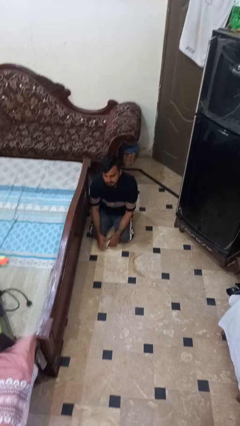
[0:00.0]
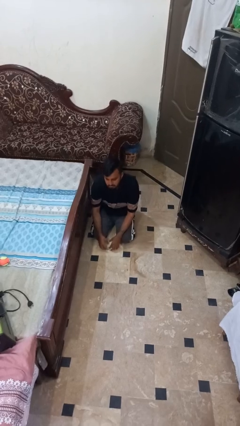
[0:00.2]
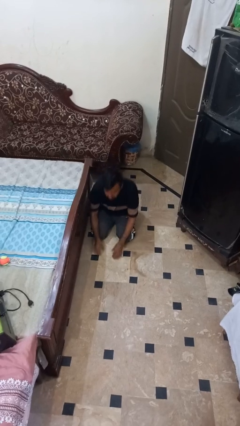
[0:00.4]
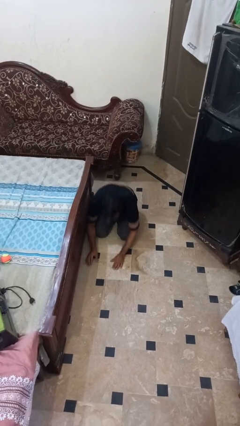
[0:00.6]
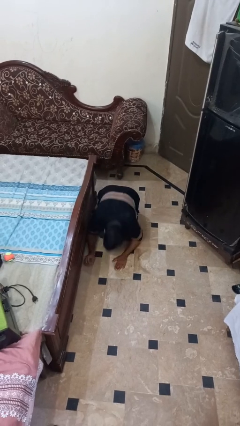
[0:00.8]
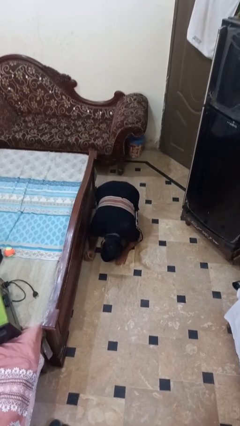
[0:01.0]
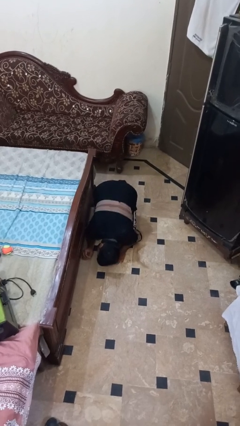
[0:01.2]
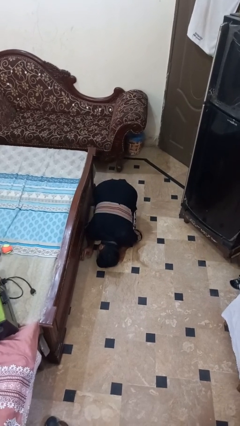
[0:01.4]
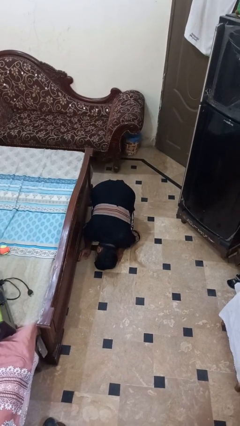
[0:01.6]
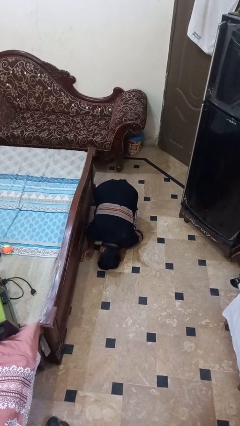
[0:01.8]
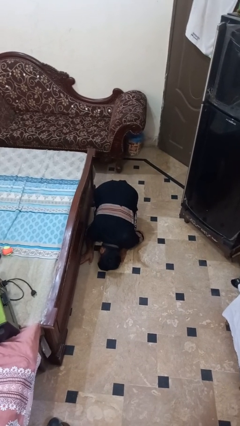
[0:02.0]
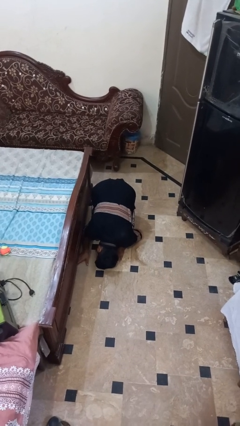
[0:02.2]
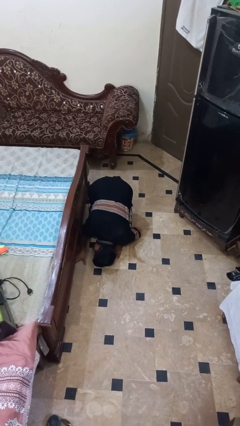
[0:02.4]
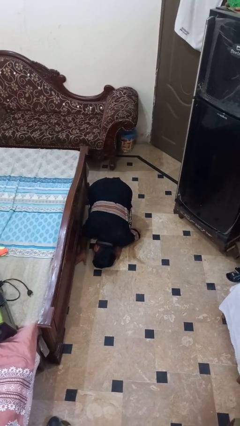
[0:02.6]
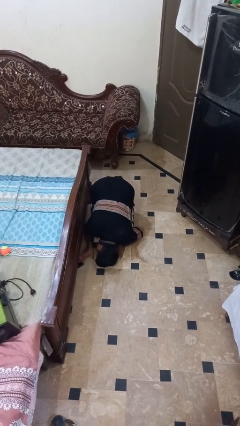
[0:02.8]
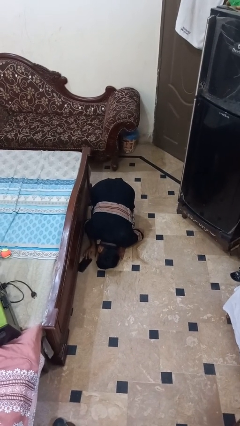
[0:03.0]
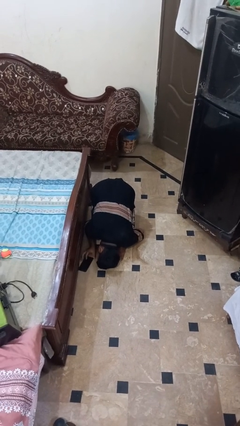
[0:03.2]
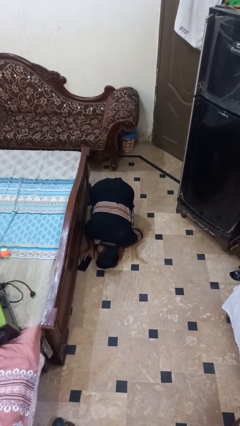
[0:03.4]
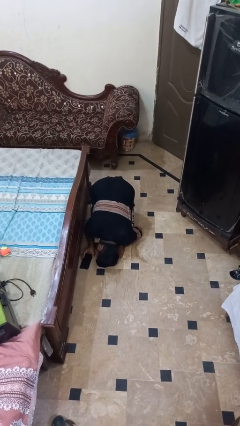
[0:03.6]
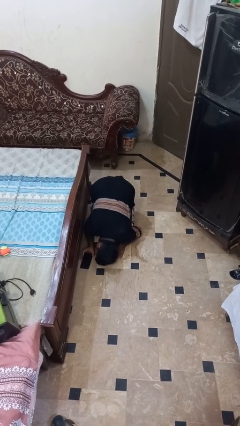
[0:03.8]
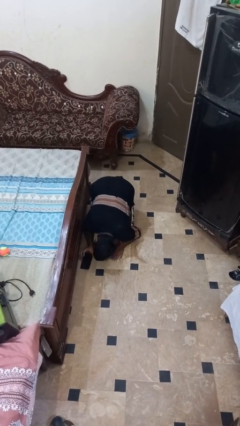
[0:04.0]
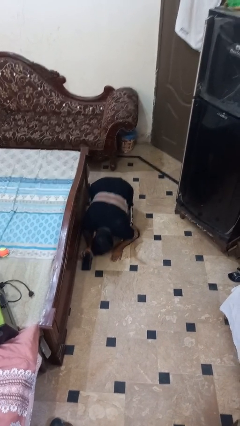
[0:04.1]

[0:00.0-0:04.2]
person searches under bed

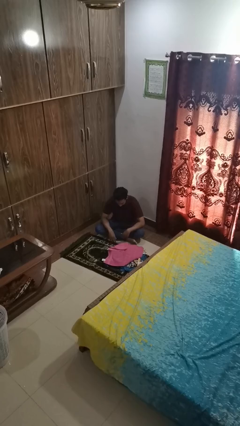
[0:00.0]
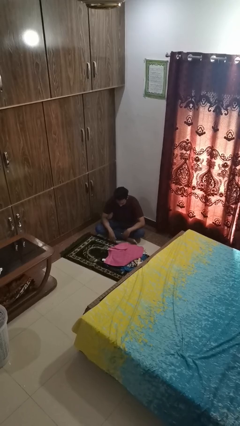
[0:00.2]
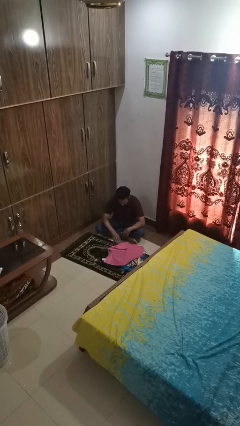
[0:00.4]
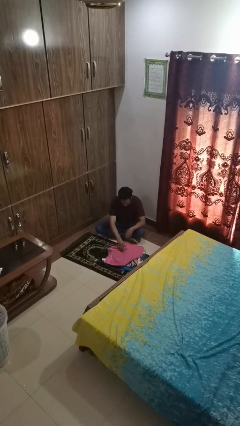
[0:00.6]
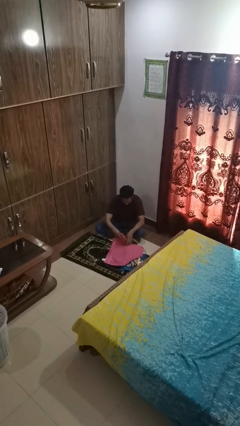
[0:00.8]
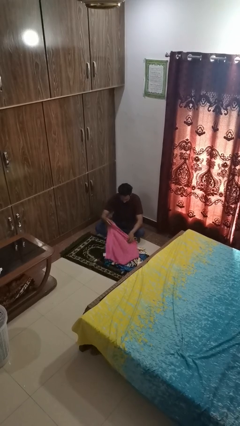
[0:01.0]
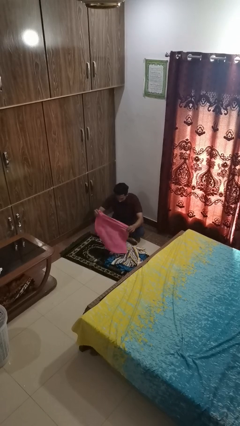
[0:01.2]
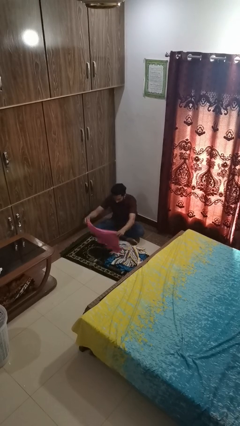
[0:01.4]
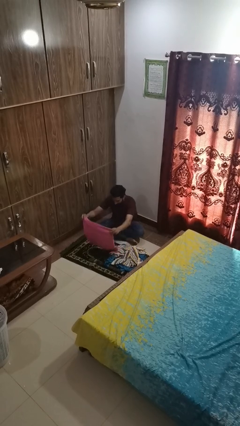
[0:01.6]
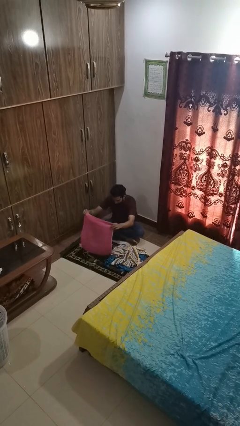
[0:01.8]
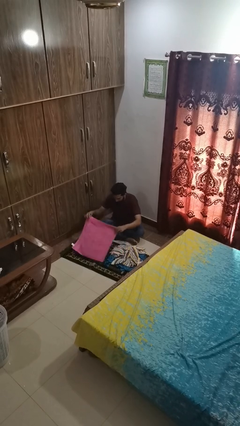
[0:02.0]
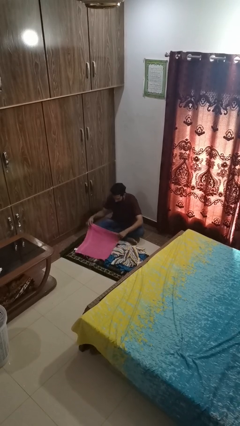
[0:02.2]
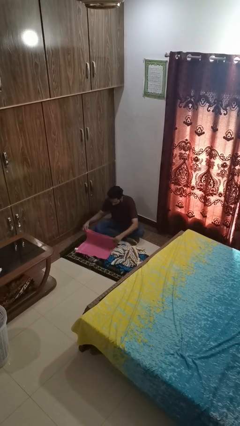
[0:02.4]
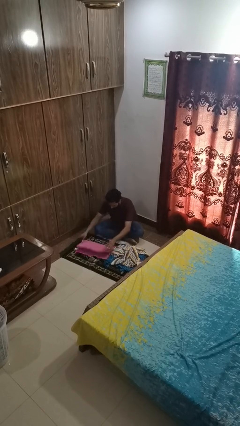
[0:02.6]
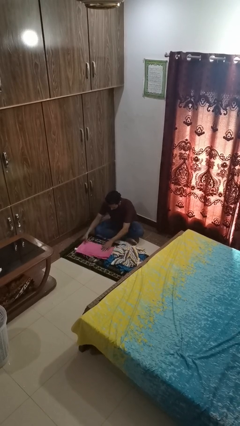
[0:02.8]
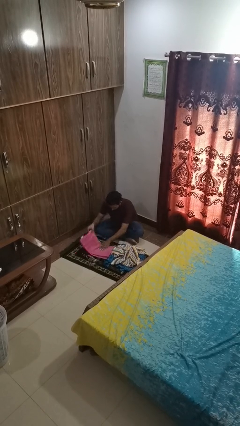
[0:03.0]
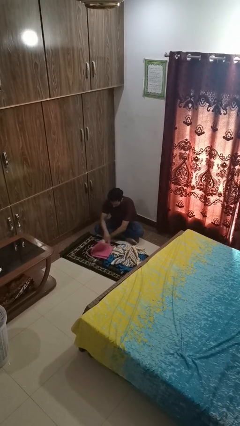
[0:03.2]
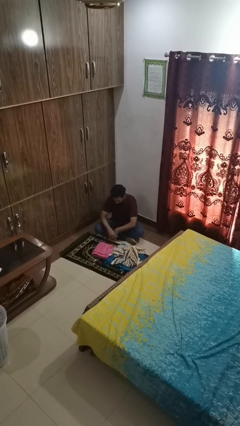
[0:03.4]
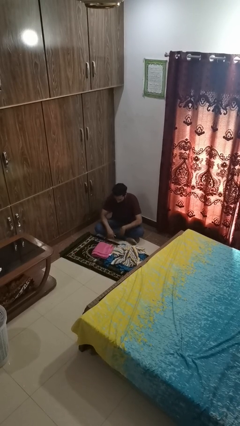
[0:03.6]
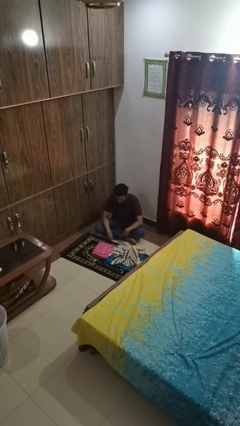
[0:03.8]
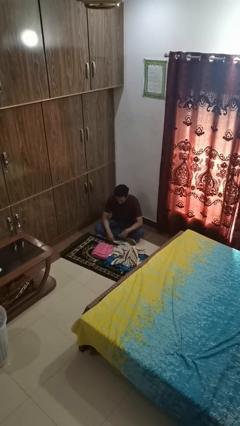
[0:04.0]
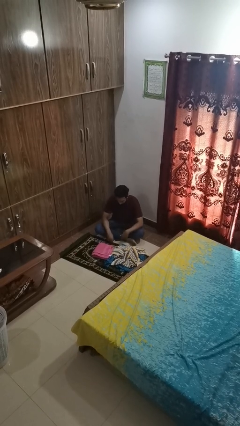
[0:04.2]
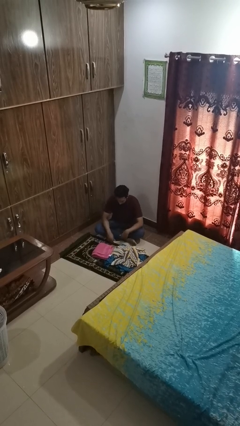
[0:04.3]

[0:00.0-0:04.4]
person folds towel

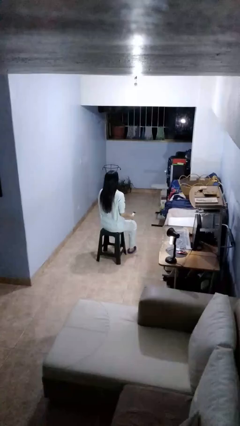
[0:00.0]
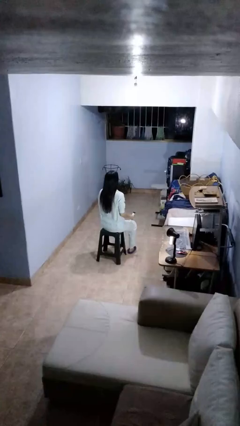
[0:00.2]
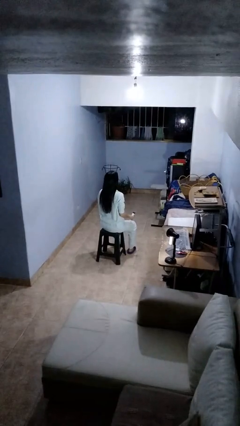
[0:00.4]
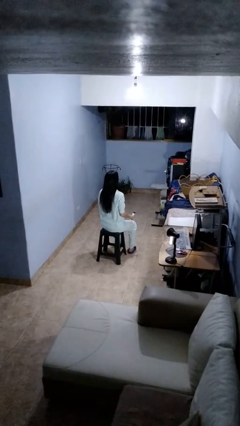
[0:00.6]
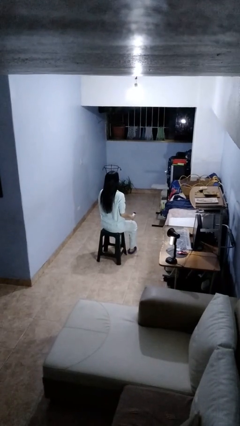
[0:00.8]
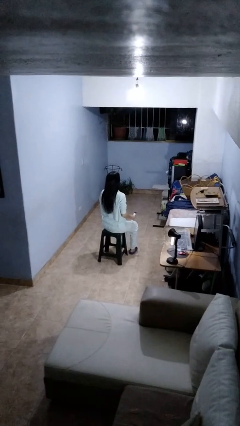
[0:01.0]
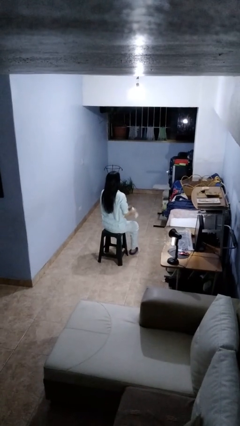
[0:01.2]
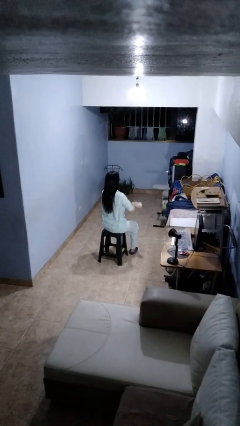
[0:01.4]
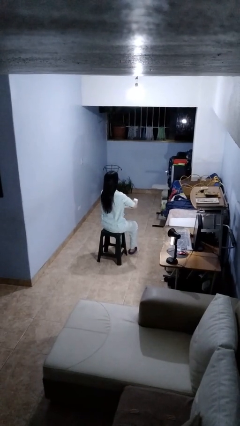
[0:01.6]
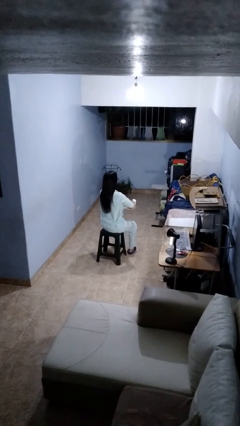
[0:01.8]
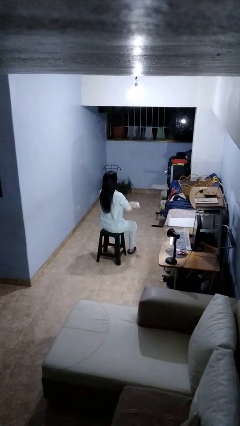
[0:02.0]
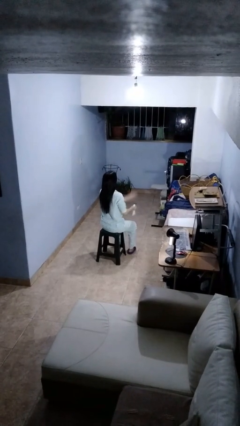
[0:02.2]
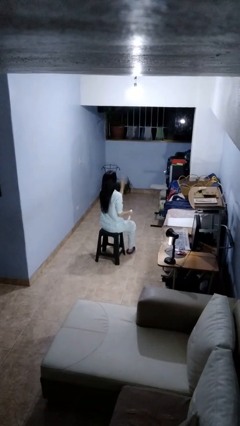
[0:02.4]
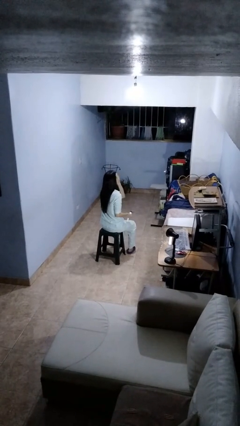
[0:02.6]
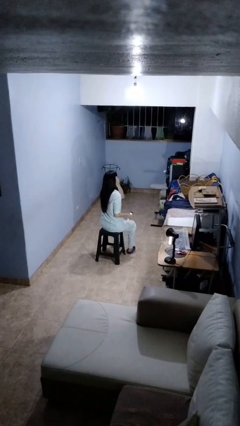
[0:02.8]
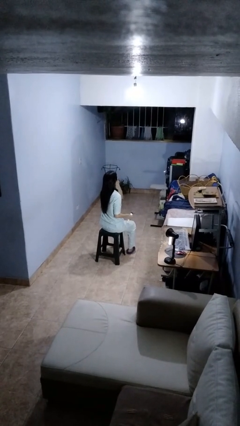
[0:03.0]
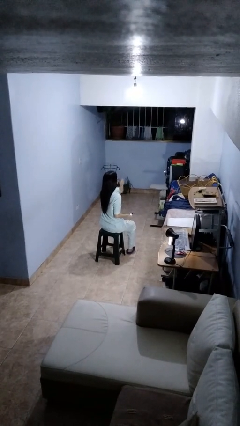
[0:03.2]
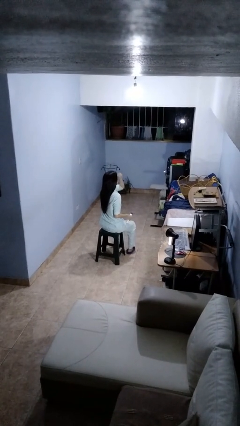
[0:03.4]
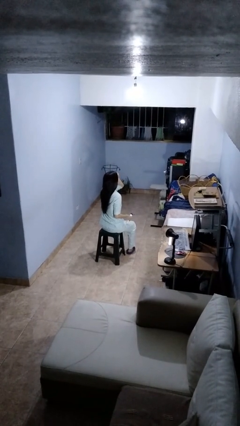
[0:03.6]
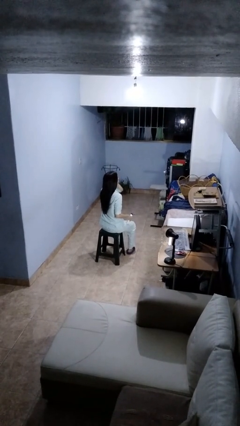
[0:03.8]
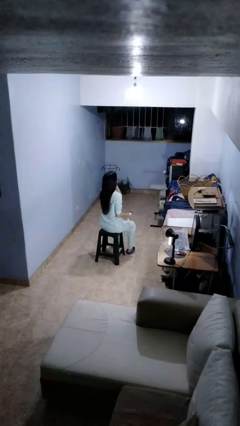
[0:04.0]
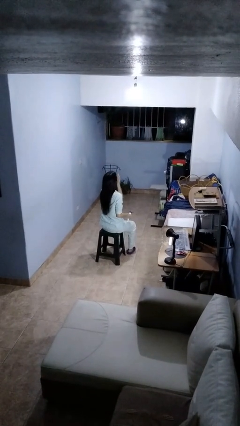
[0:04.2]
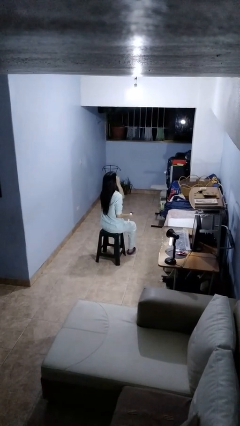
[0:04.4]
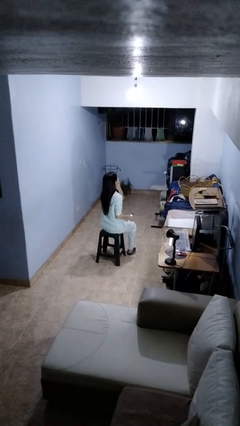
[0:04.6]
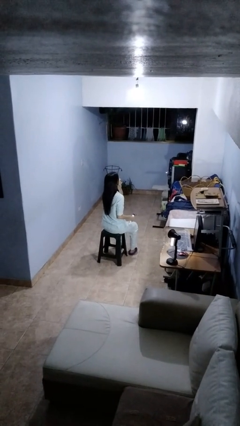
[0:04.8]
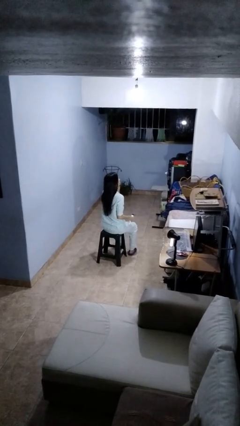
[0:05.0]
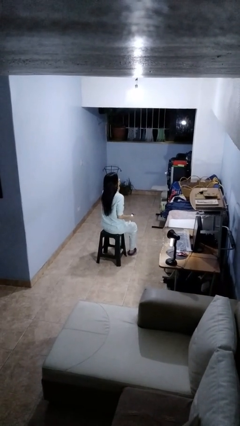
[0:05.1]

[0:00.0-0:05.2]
person applies sunscreen

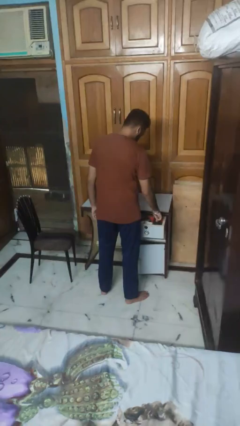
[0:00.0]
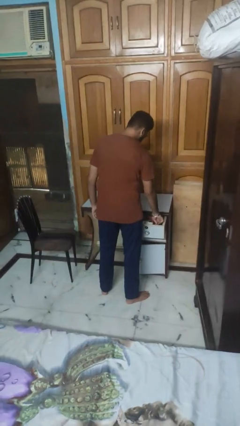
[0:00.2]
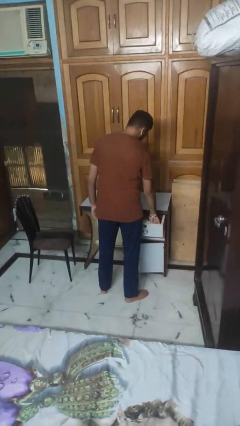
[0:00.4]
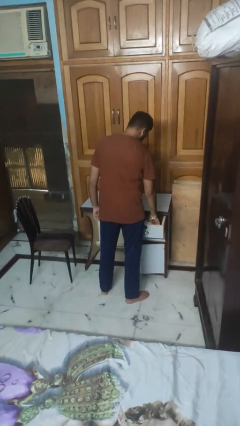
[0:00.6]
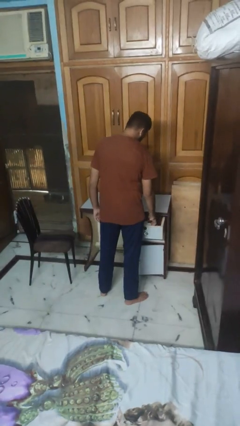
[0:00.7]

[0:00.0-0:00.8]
person puts object into kitchen drawer

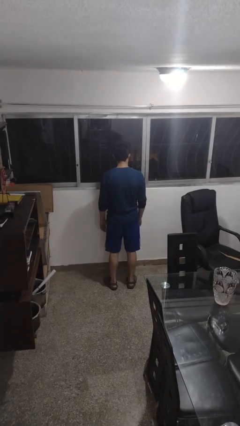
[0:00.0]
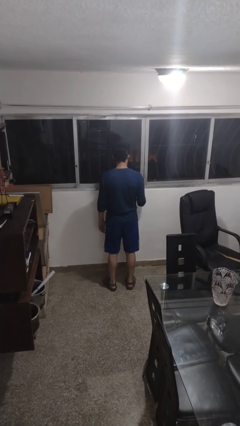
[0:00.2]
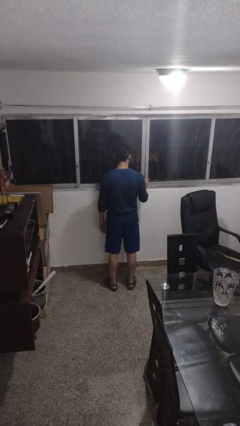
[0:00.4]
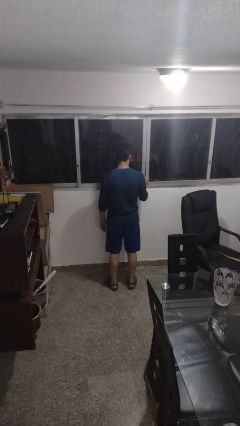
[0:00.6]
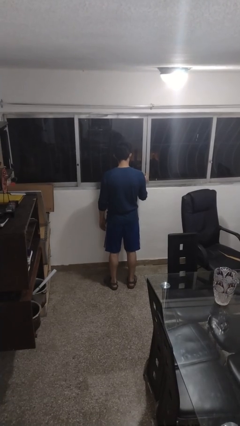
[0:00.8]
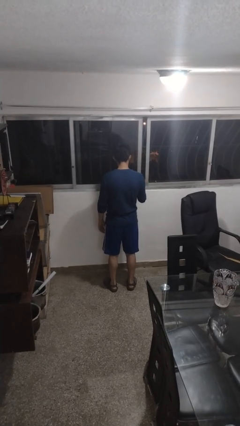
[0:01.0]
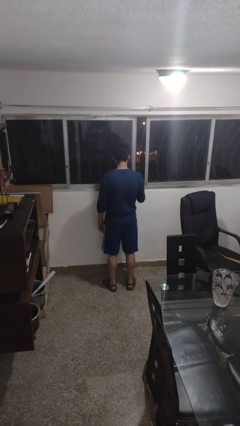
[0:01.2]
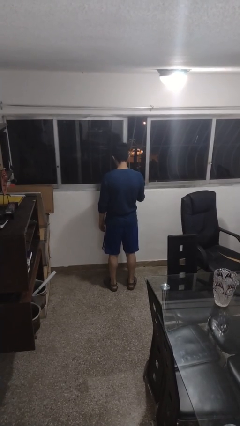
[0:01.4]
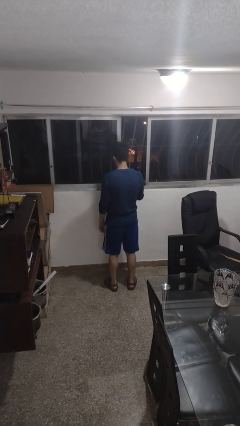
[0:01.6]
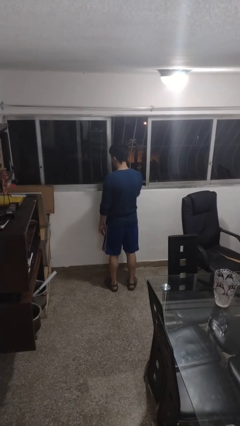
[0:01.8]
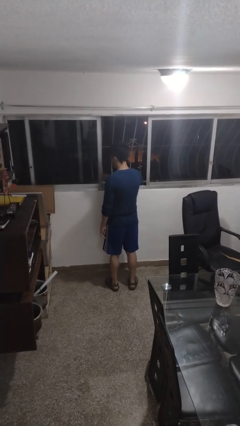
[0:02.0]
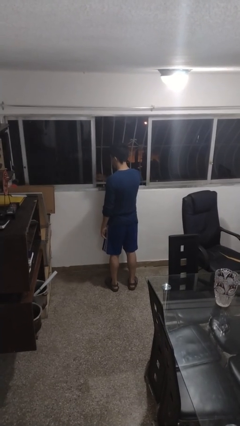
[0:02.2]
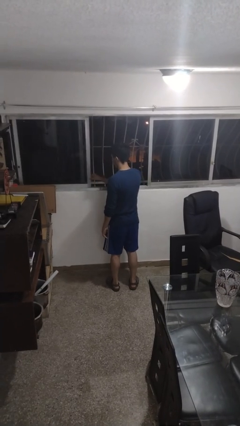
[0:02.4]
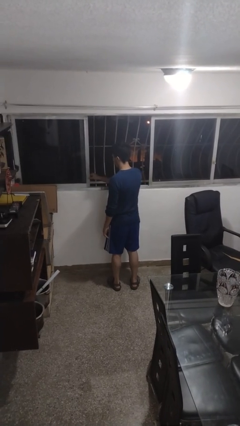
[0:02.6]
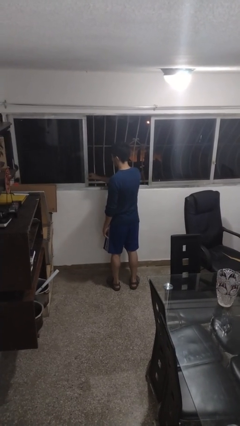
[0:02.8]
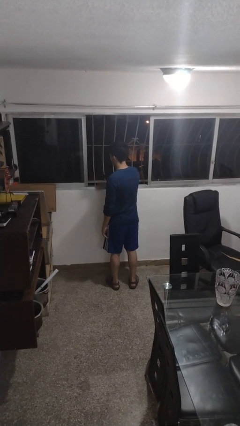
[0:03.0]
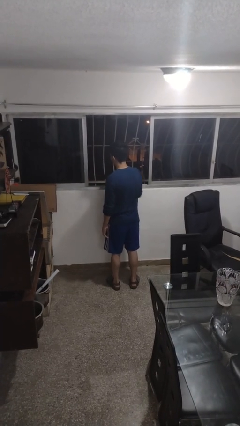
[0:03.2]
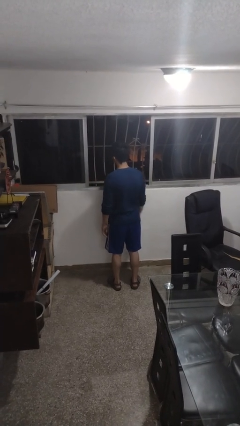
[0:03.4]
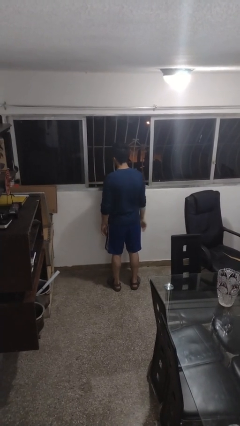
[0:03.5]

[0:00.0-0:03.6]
person opens home window
